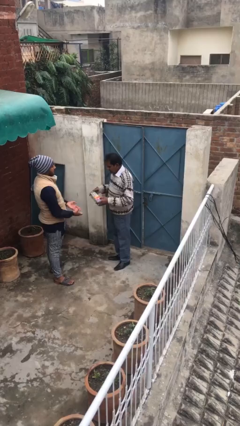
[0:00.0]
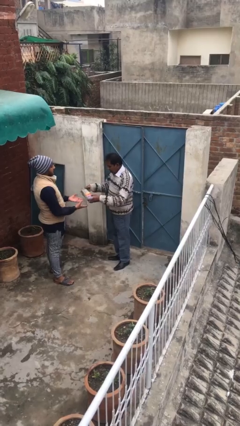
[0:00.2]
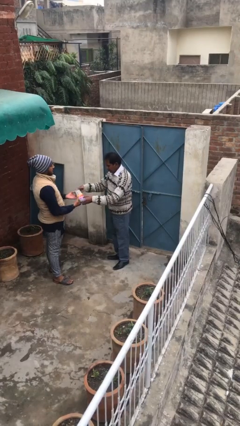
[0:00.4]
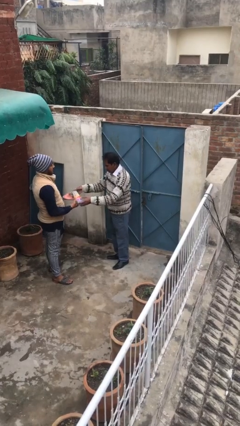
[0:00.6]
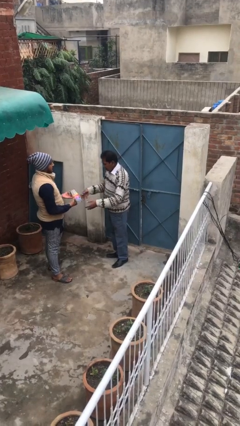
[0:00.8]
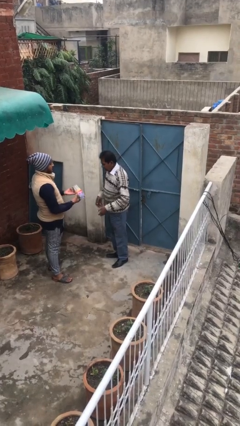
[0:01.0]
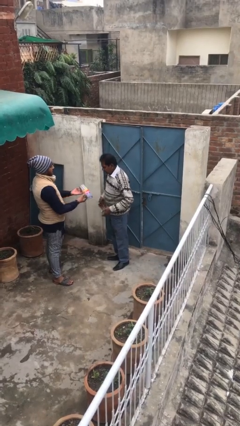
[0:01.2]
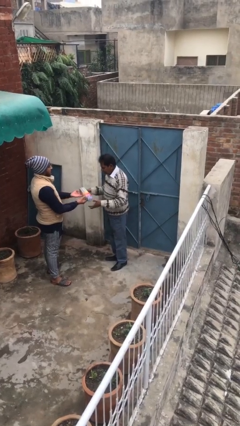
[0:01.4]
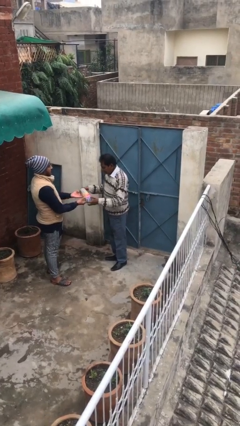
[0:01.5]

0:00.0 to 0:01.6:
person transfers object to person

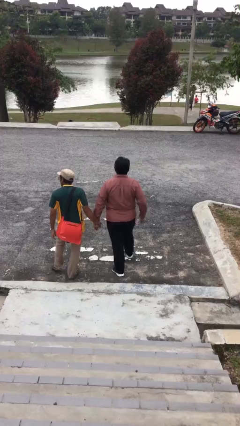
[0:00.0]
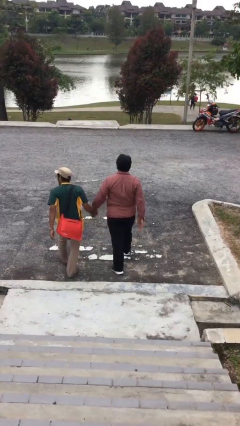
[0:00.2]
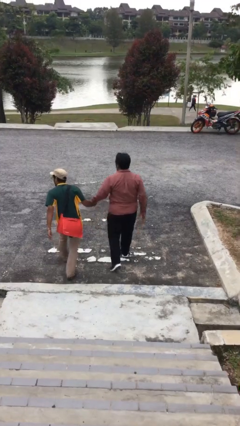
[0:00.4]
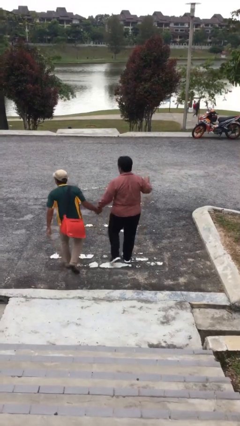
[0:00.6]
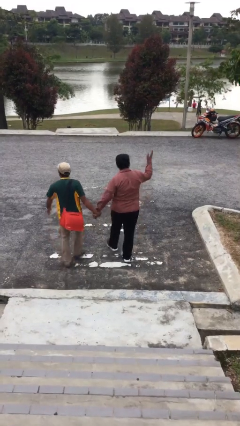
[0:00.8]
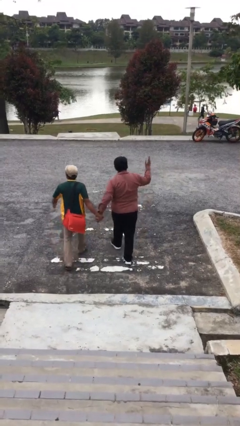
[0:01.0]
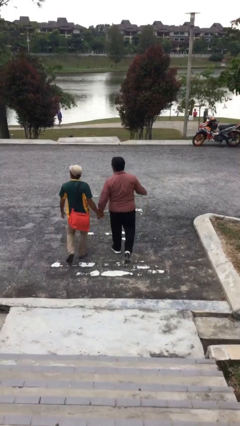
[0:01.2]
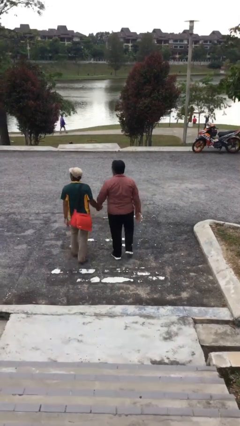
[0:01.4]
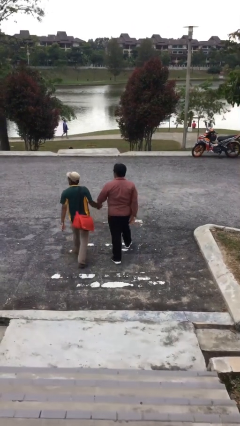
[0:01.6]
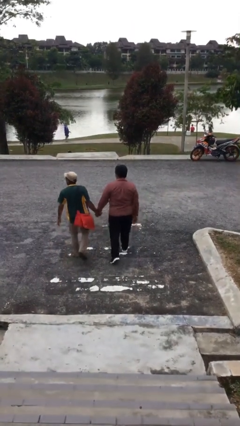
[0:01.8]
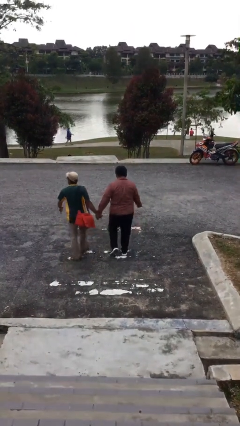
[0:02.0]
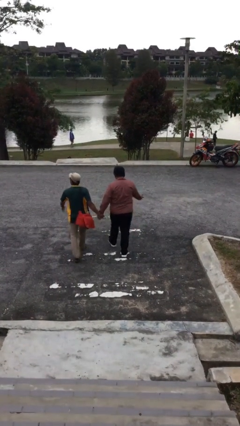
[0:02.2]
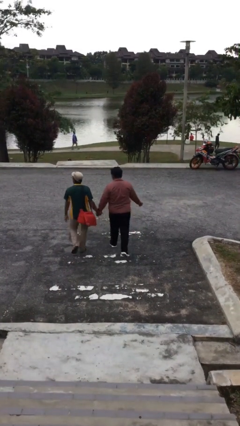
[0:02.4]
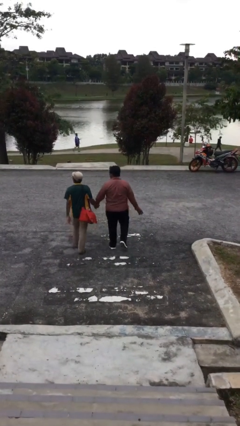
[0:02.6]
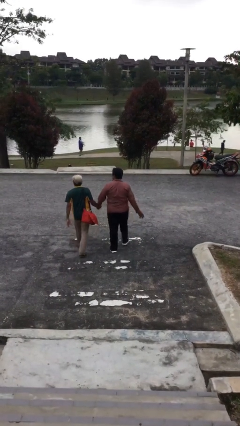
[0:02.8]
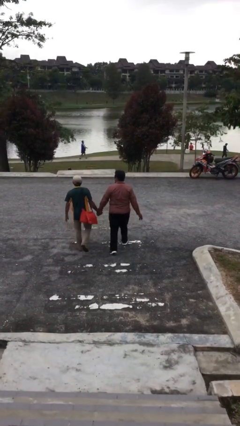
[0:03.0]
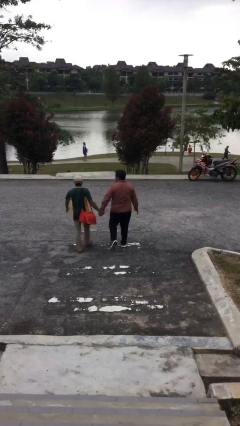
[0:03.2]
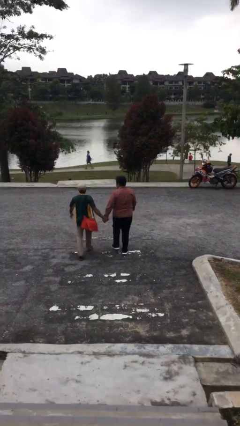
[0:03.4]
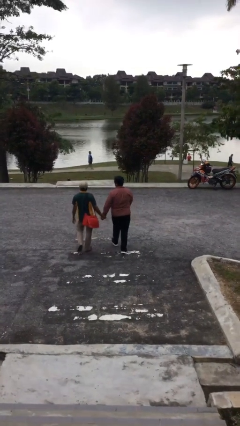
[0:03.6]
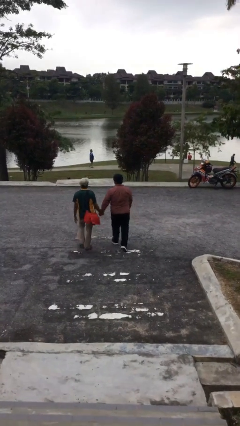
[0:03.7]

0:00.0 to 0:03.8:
person holds hand

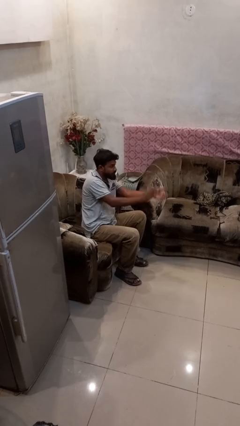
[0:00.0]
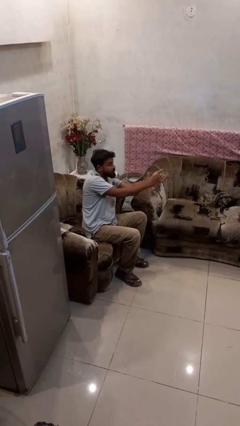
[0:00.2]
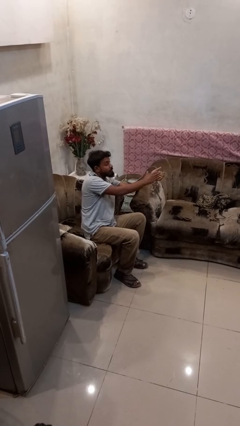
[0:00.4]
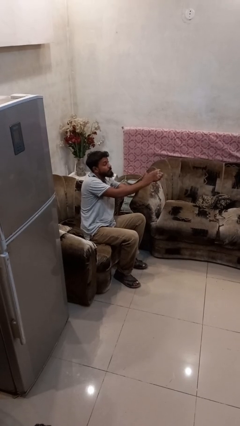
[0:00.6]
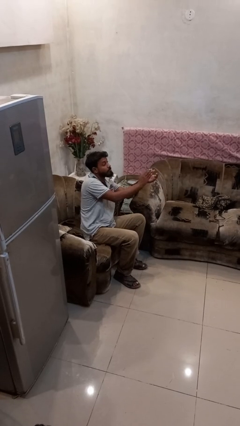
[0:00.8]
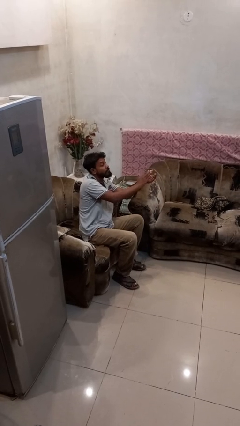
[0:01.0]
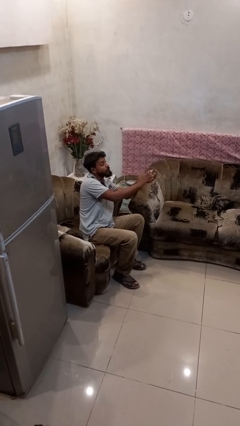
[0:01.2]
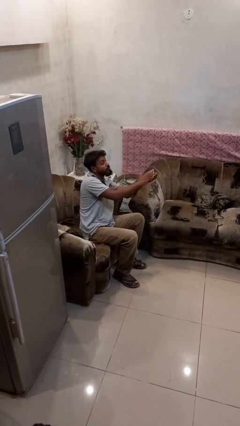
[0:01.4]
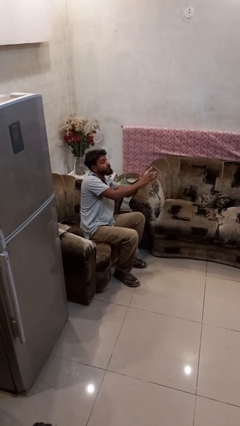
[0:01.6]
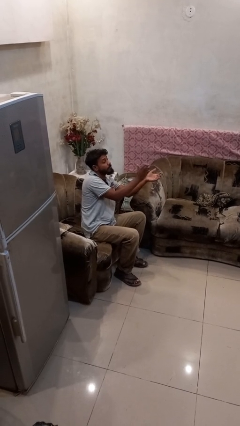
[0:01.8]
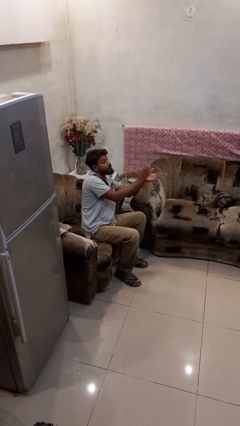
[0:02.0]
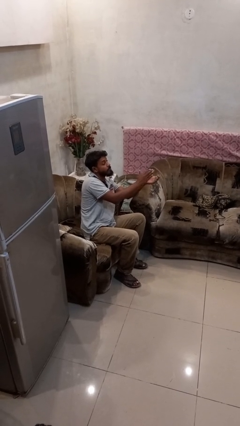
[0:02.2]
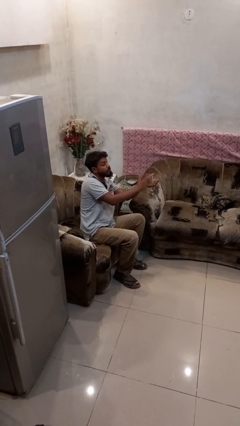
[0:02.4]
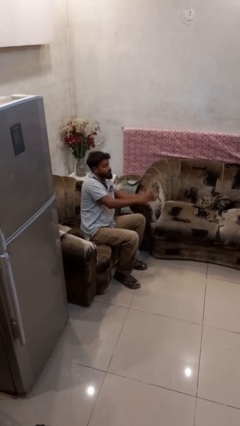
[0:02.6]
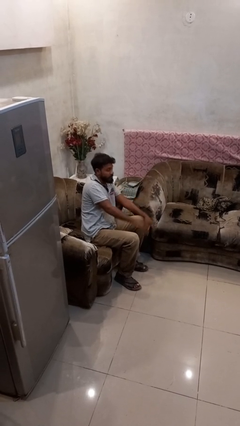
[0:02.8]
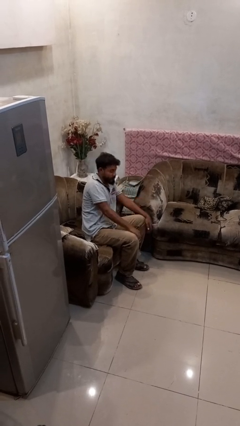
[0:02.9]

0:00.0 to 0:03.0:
person claps hands

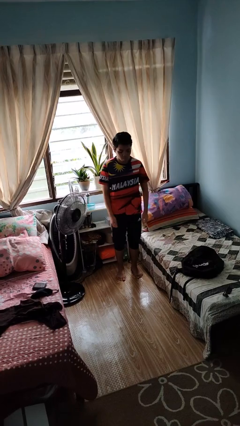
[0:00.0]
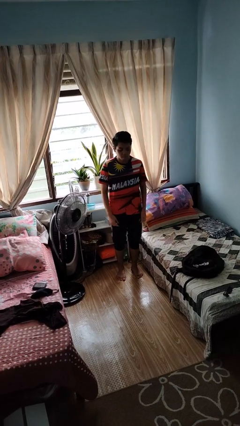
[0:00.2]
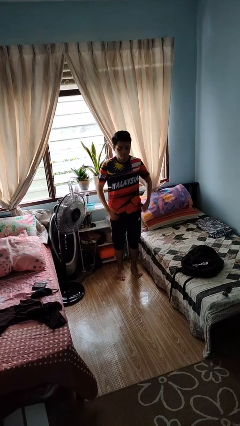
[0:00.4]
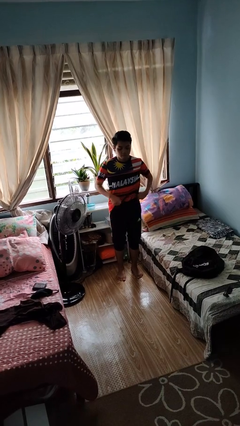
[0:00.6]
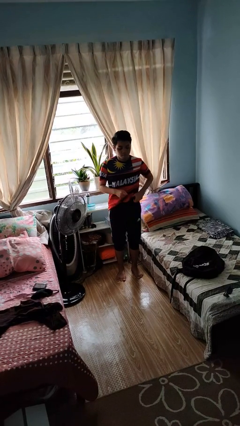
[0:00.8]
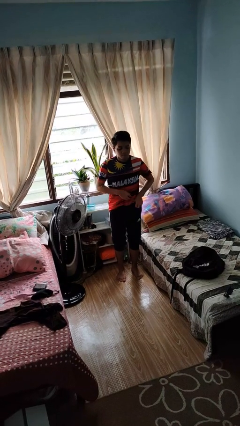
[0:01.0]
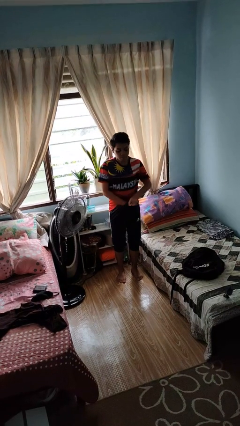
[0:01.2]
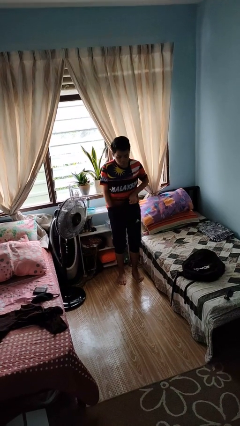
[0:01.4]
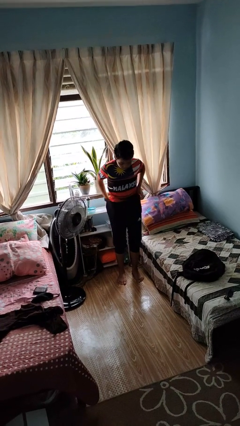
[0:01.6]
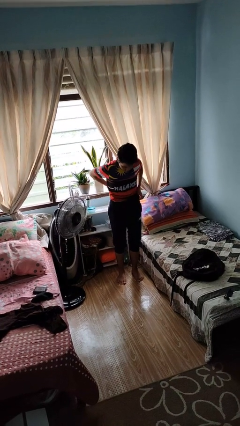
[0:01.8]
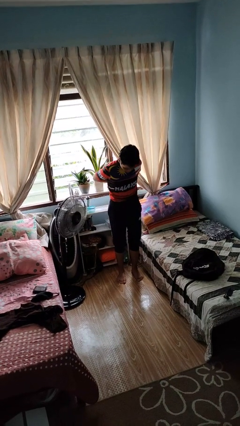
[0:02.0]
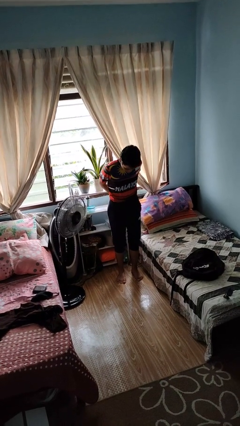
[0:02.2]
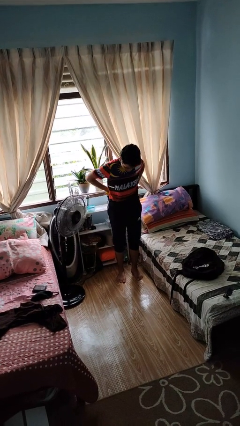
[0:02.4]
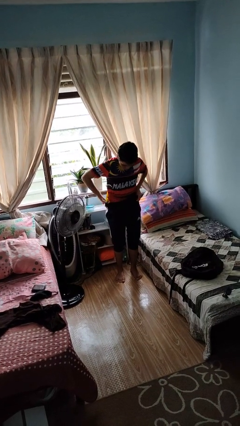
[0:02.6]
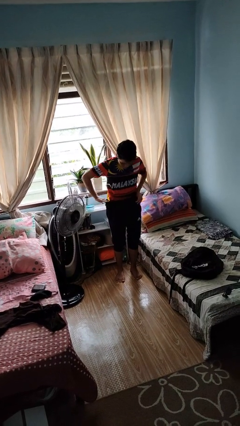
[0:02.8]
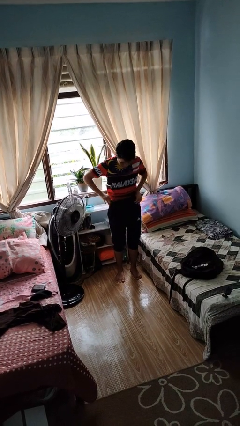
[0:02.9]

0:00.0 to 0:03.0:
person tucks in shirt

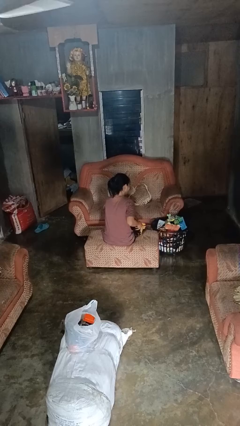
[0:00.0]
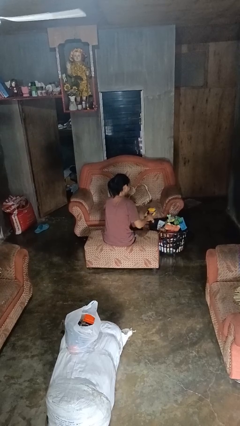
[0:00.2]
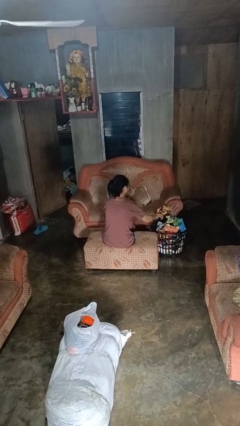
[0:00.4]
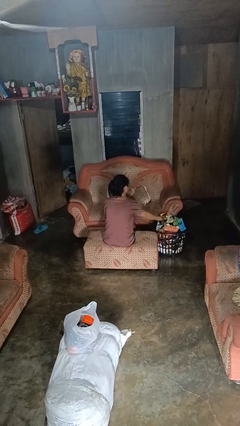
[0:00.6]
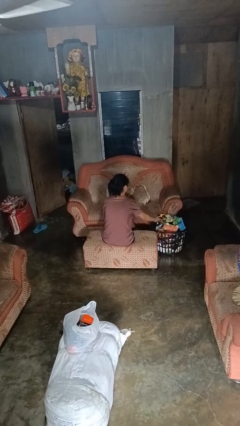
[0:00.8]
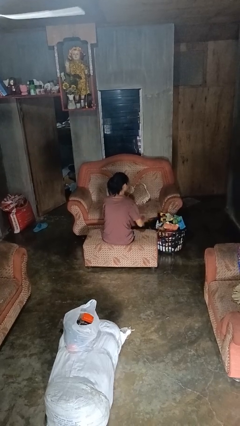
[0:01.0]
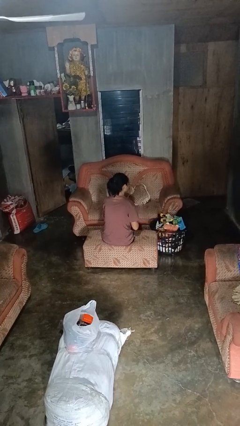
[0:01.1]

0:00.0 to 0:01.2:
person puts object into basket

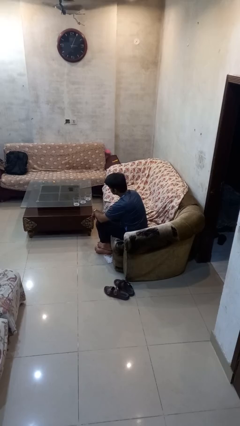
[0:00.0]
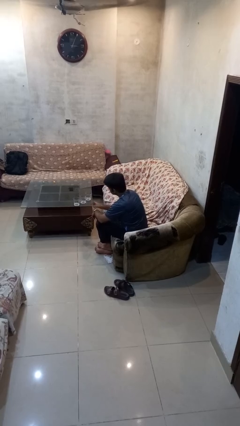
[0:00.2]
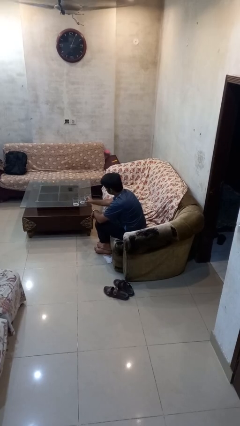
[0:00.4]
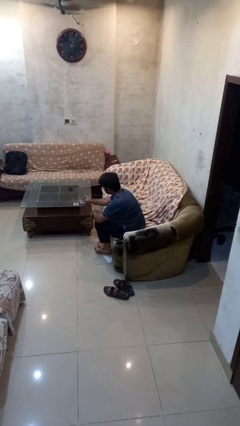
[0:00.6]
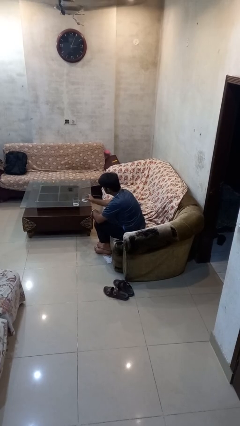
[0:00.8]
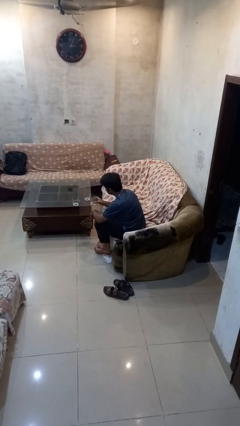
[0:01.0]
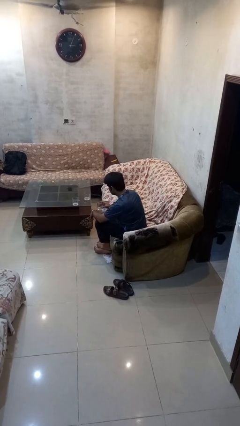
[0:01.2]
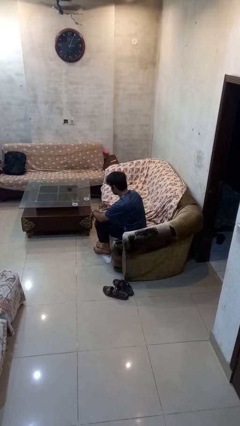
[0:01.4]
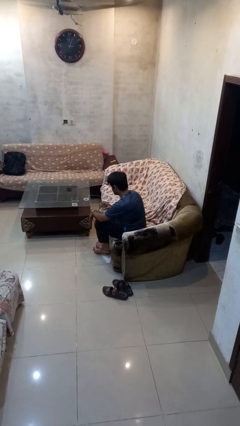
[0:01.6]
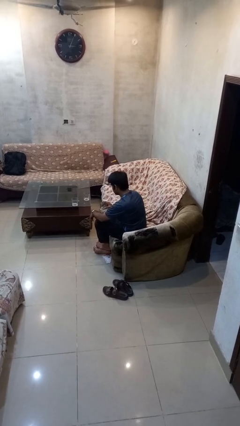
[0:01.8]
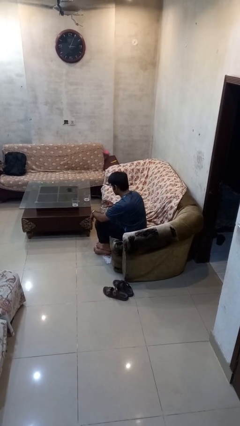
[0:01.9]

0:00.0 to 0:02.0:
person picks up object from table

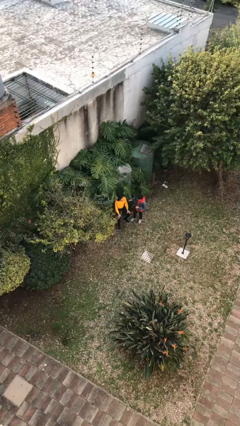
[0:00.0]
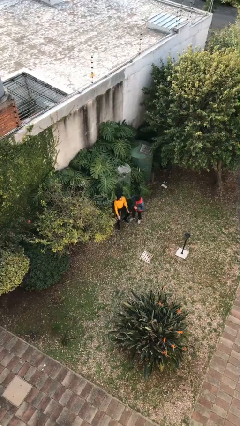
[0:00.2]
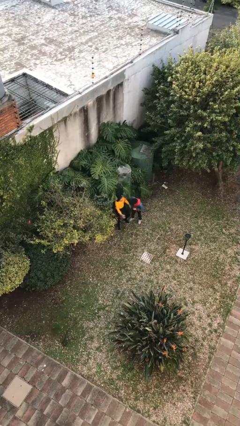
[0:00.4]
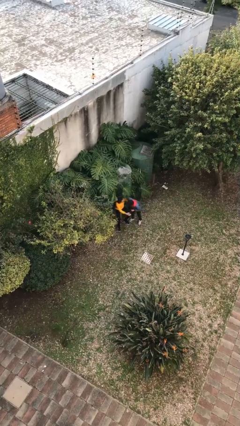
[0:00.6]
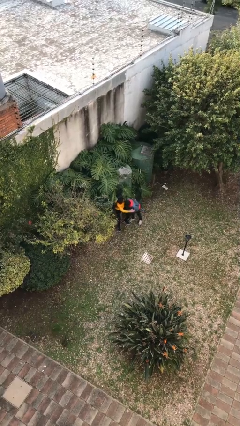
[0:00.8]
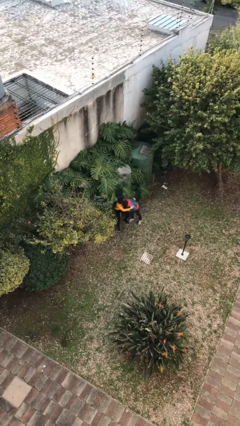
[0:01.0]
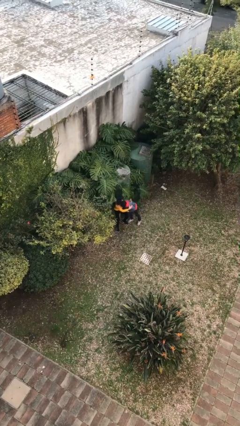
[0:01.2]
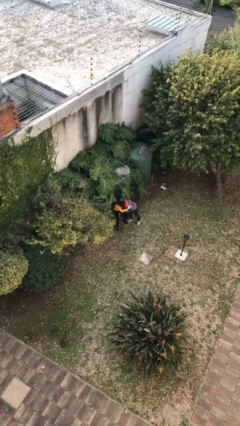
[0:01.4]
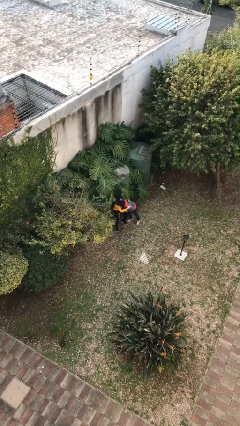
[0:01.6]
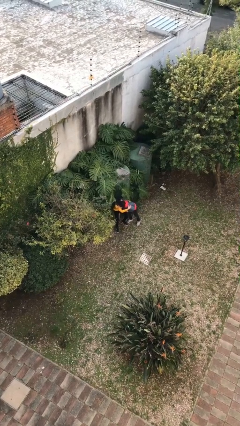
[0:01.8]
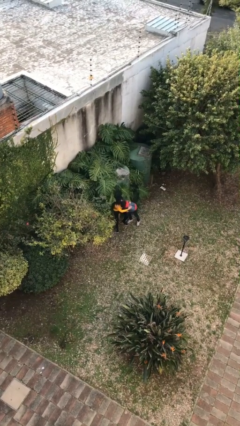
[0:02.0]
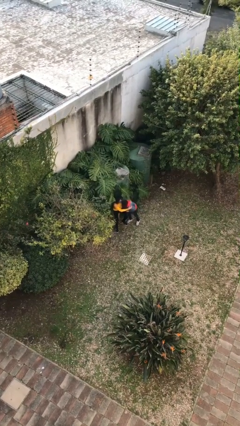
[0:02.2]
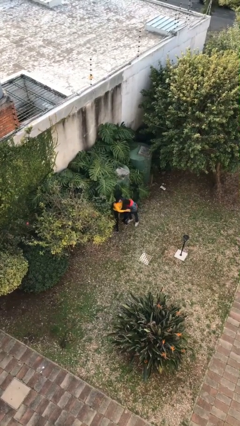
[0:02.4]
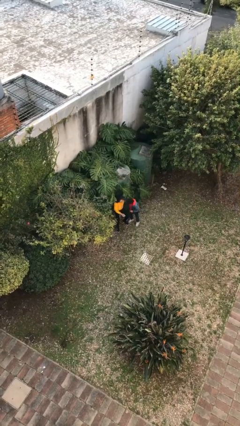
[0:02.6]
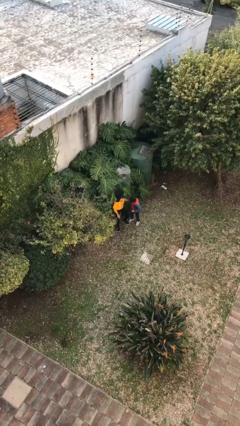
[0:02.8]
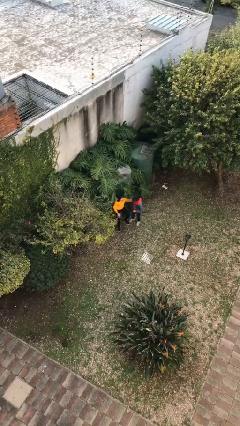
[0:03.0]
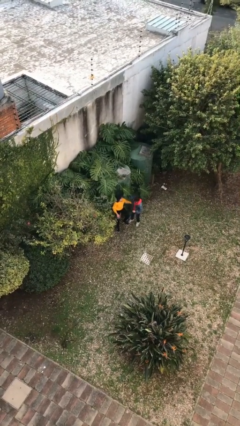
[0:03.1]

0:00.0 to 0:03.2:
person embraces person
